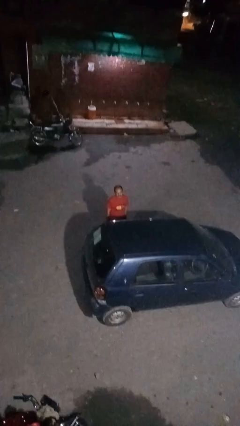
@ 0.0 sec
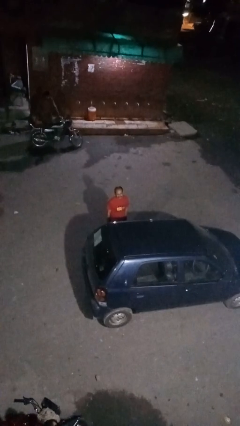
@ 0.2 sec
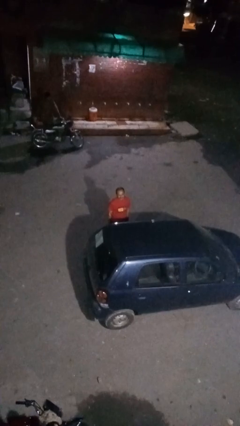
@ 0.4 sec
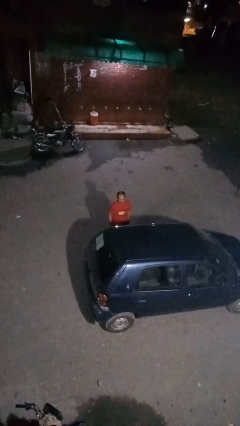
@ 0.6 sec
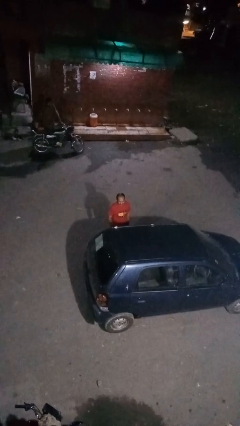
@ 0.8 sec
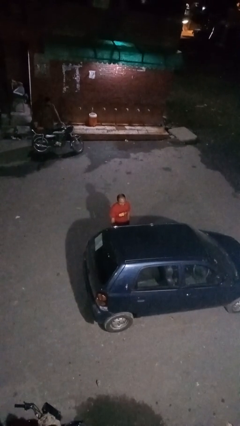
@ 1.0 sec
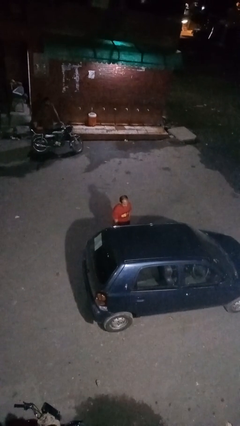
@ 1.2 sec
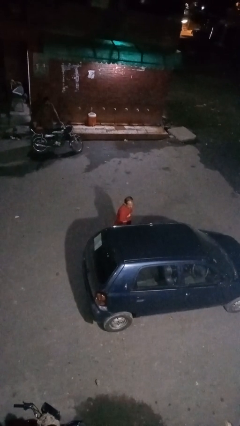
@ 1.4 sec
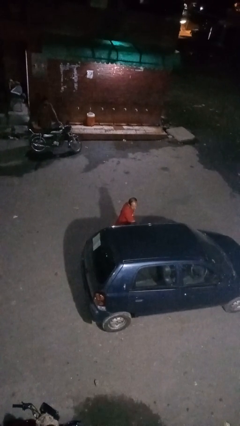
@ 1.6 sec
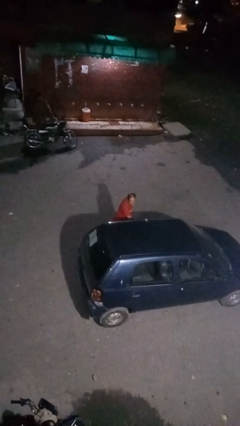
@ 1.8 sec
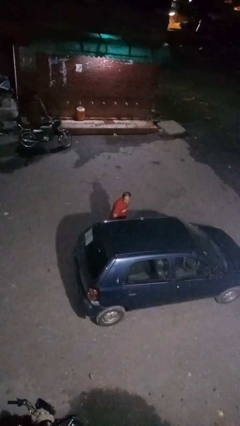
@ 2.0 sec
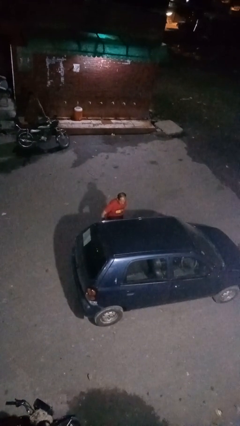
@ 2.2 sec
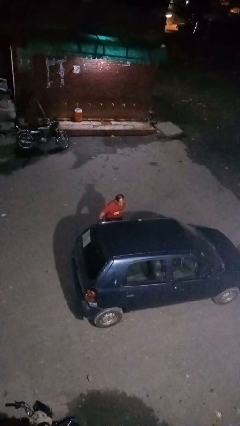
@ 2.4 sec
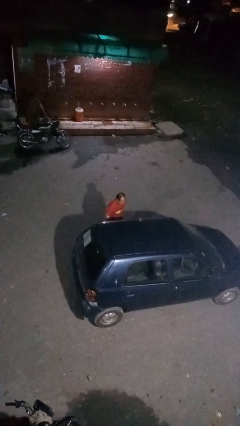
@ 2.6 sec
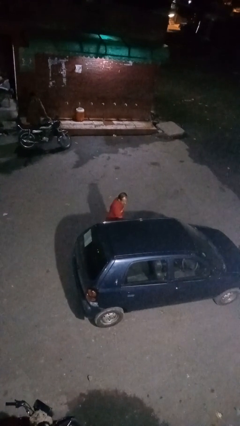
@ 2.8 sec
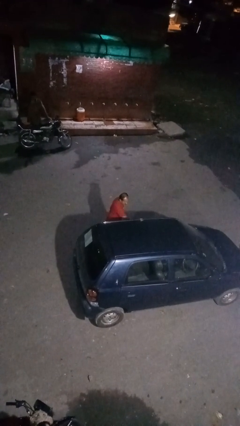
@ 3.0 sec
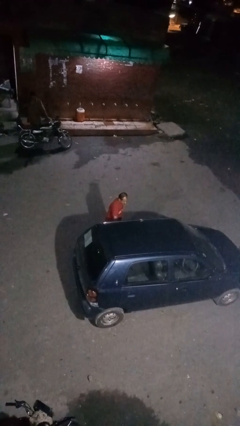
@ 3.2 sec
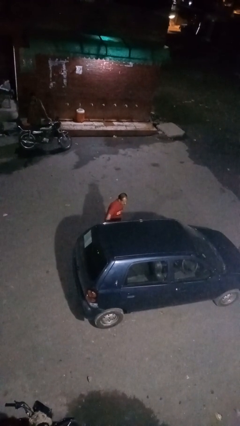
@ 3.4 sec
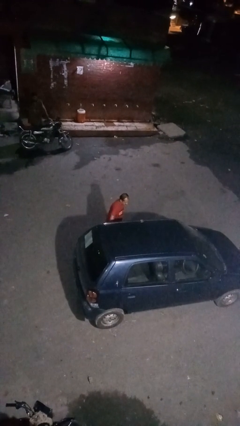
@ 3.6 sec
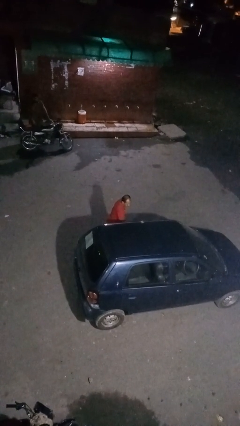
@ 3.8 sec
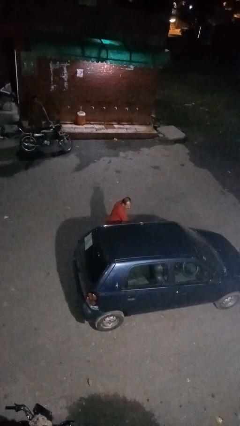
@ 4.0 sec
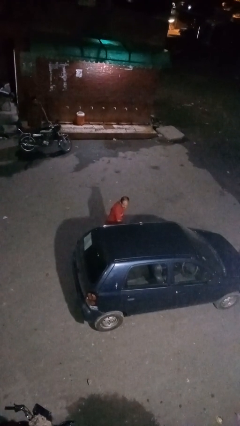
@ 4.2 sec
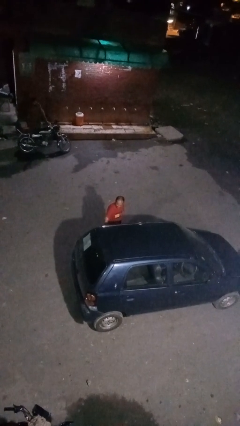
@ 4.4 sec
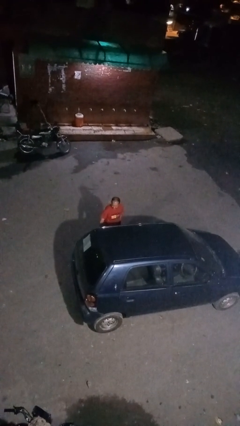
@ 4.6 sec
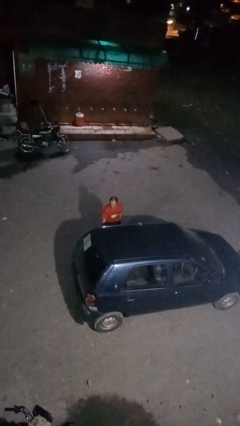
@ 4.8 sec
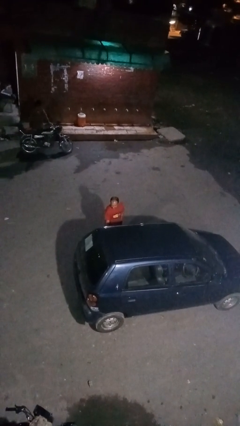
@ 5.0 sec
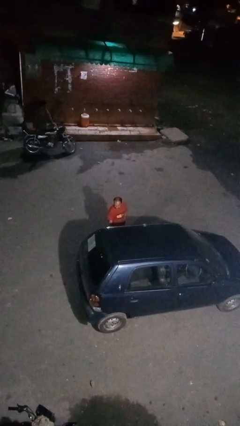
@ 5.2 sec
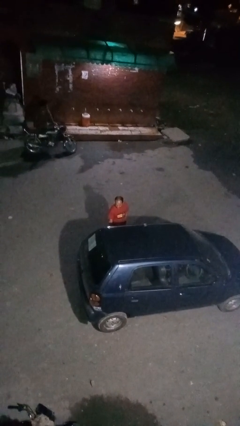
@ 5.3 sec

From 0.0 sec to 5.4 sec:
person polishes car with rag

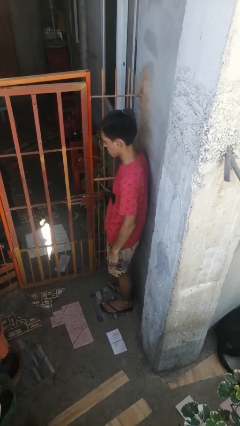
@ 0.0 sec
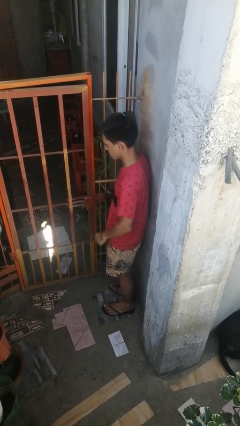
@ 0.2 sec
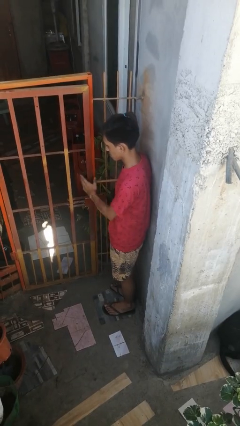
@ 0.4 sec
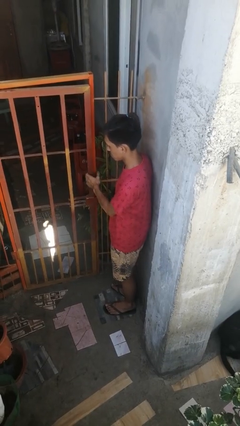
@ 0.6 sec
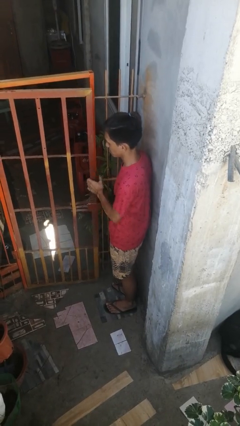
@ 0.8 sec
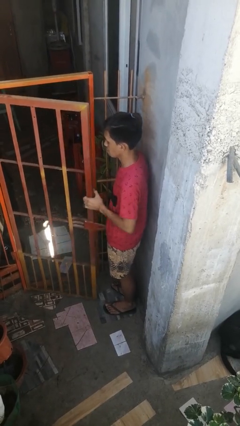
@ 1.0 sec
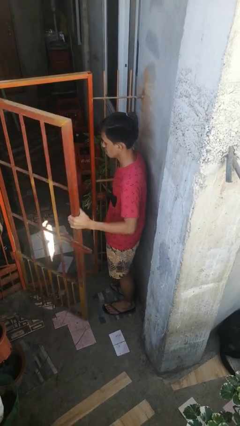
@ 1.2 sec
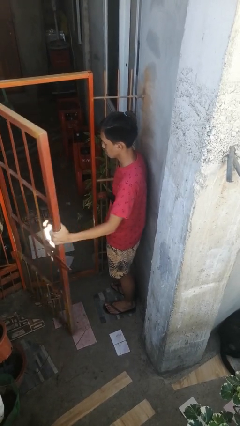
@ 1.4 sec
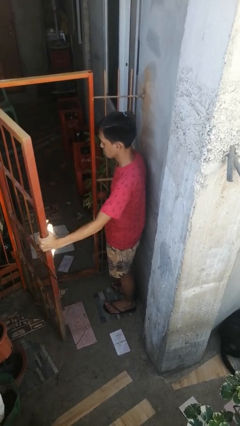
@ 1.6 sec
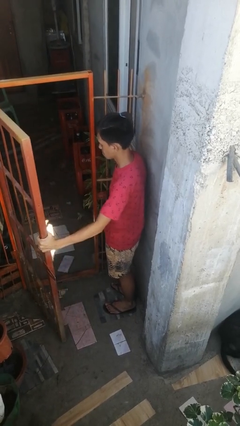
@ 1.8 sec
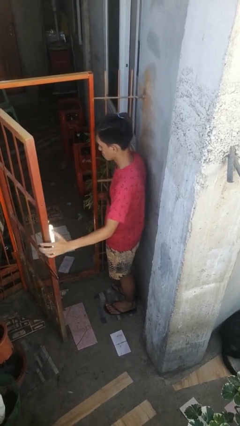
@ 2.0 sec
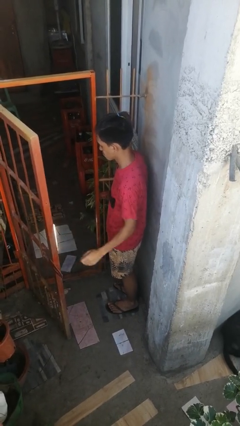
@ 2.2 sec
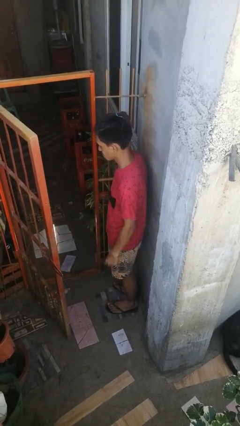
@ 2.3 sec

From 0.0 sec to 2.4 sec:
person opens gate

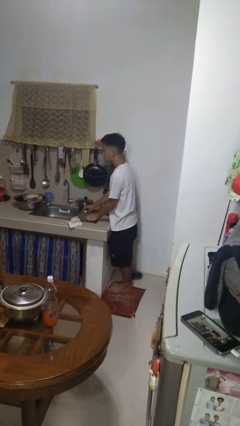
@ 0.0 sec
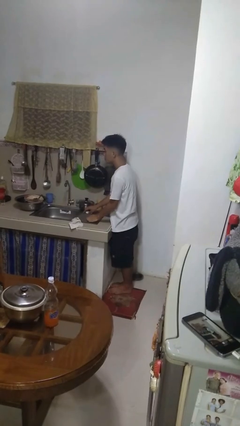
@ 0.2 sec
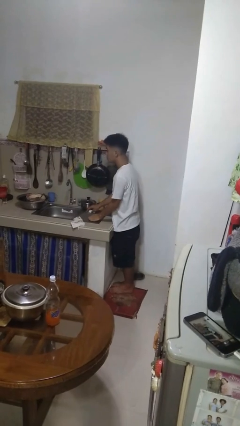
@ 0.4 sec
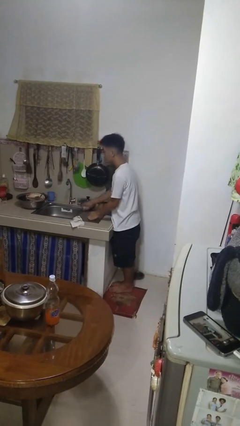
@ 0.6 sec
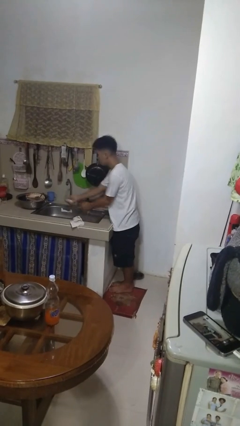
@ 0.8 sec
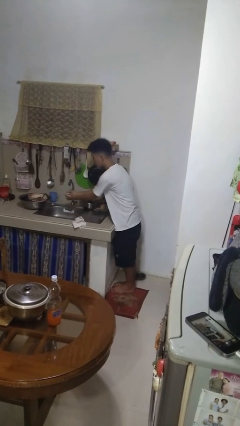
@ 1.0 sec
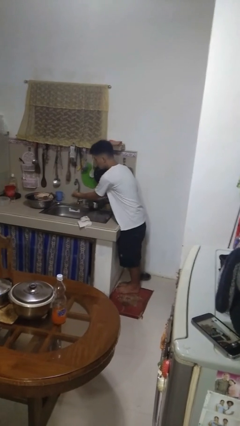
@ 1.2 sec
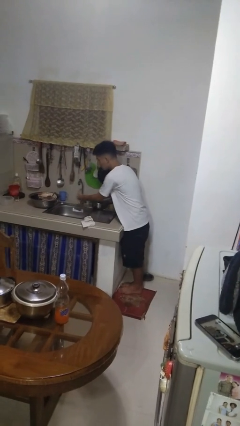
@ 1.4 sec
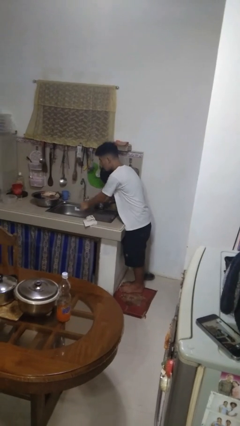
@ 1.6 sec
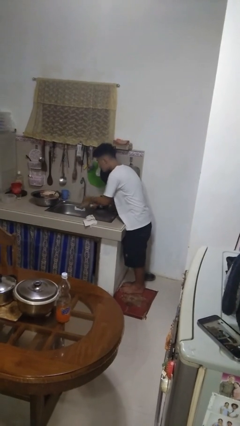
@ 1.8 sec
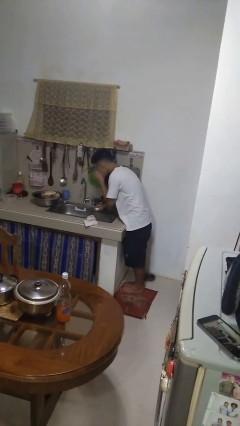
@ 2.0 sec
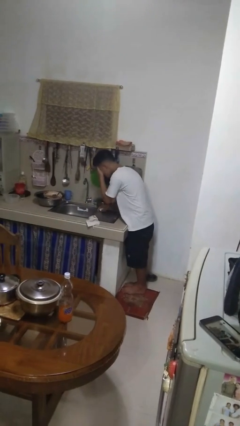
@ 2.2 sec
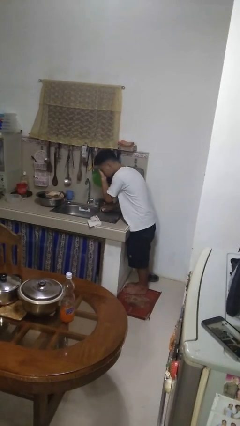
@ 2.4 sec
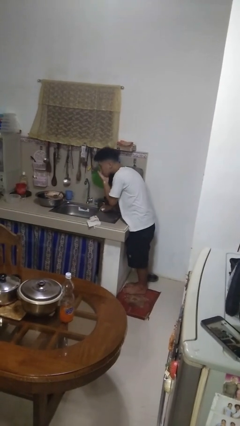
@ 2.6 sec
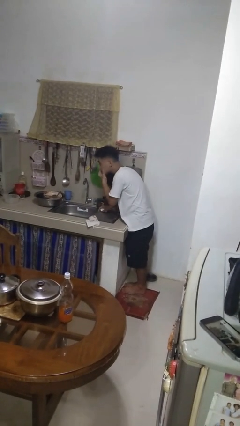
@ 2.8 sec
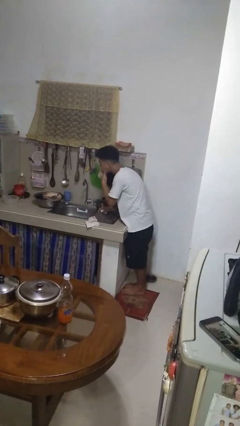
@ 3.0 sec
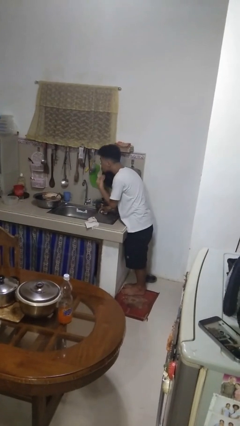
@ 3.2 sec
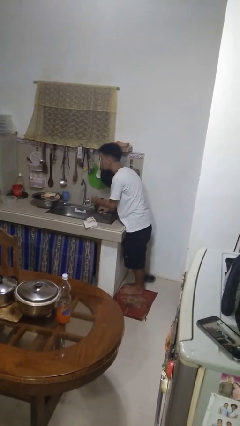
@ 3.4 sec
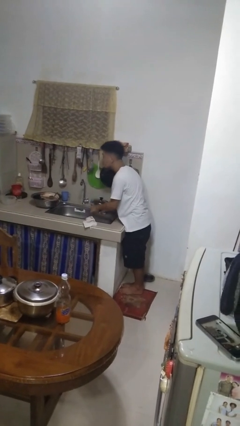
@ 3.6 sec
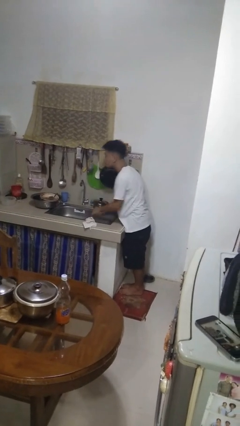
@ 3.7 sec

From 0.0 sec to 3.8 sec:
person washes face

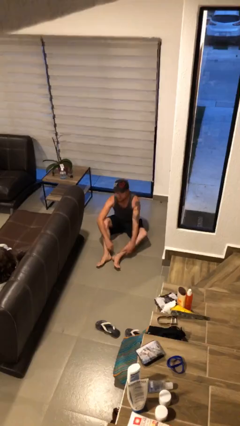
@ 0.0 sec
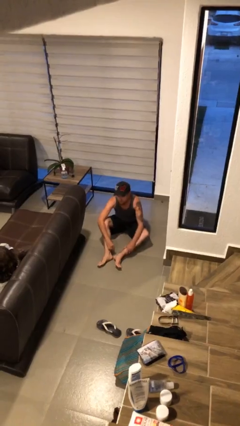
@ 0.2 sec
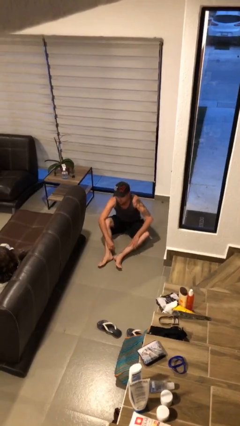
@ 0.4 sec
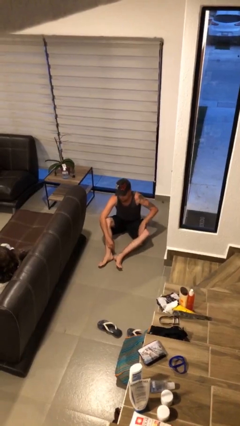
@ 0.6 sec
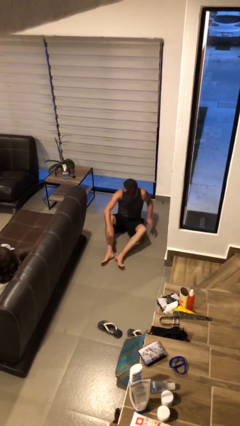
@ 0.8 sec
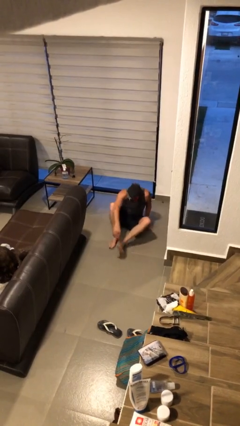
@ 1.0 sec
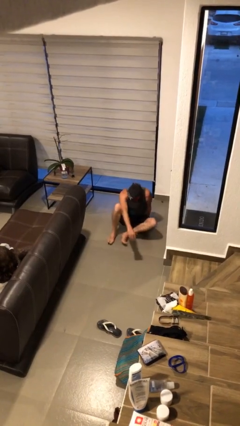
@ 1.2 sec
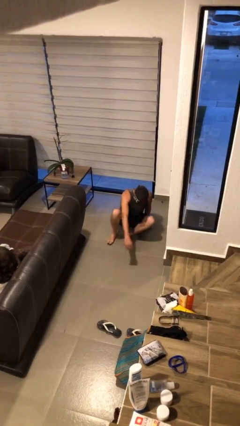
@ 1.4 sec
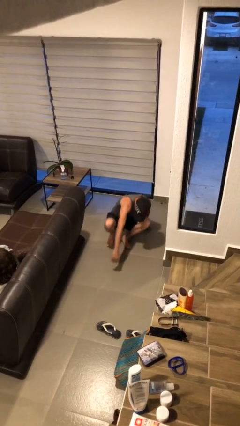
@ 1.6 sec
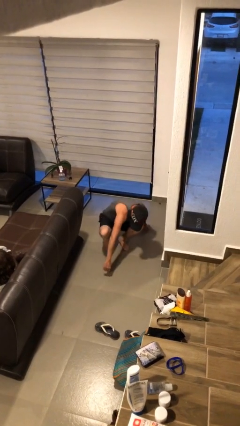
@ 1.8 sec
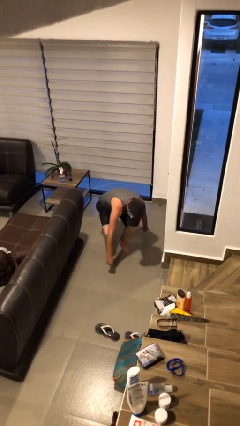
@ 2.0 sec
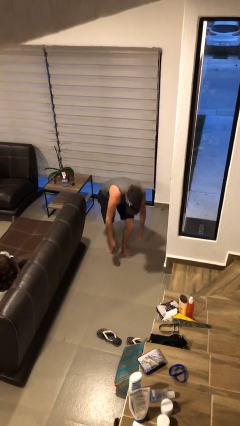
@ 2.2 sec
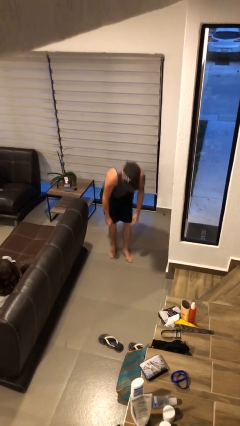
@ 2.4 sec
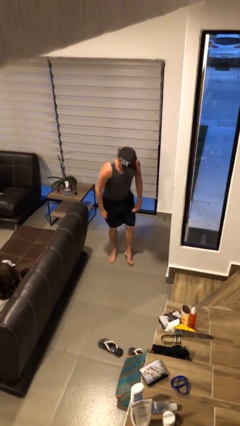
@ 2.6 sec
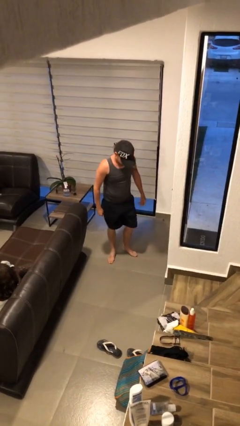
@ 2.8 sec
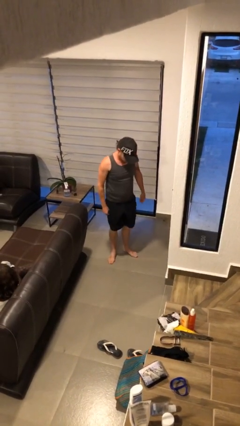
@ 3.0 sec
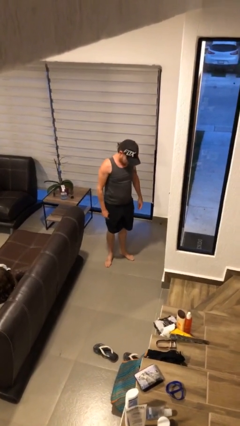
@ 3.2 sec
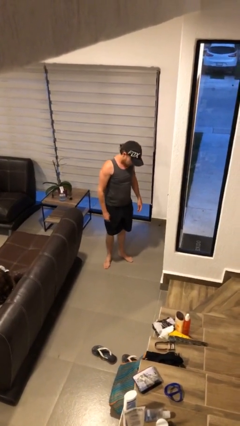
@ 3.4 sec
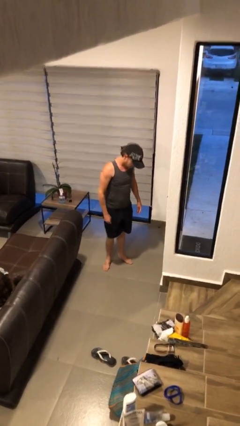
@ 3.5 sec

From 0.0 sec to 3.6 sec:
person stands up

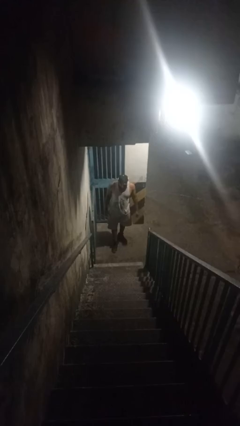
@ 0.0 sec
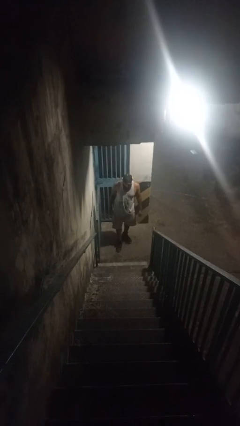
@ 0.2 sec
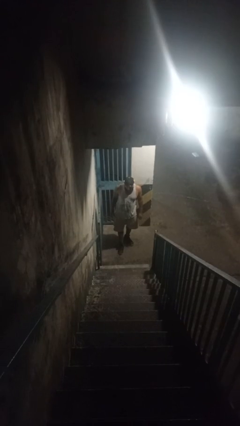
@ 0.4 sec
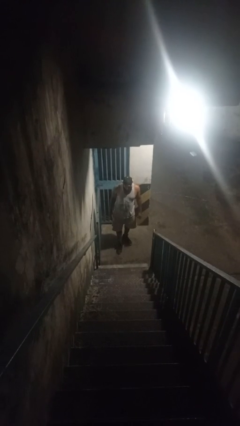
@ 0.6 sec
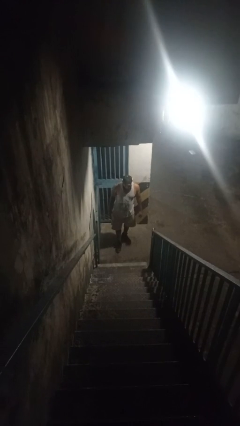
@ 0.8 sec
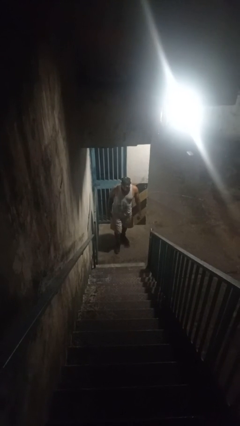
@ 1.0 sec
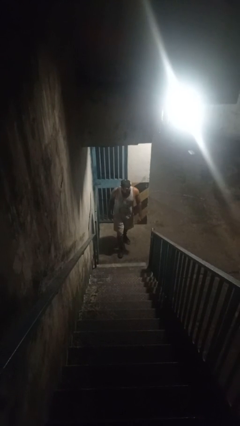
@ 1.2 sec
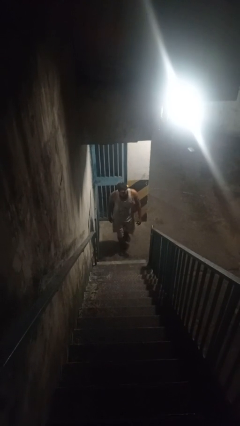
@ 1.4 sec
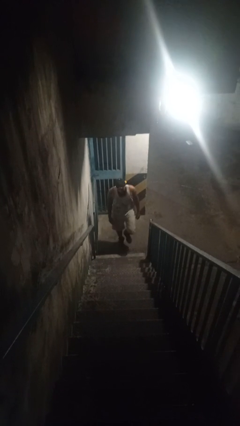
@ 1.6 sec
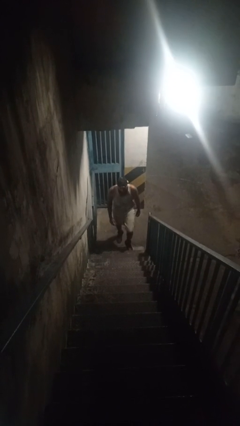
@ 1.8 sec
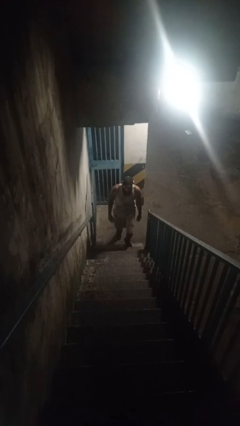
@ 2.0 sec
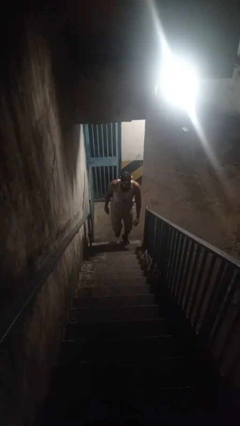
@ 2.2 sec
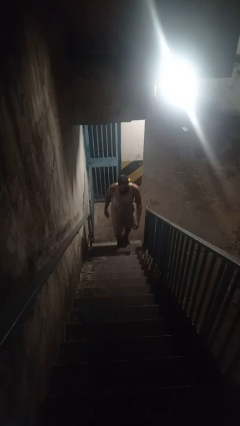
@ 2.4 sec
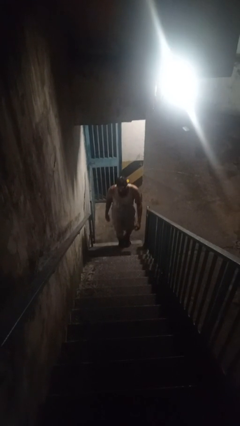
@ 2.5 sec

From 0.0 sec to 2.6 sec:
person climbs down stairs
